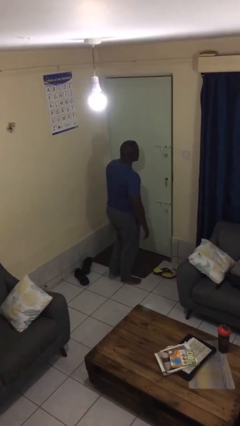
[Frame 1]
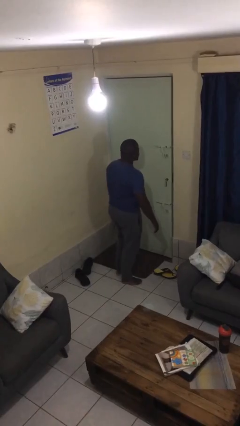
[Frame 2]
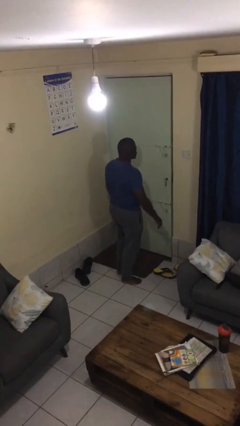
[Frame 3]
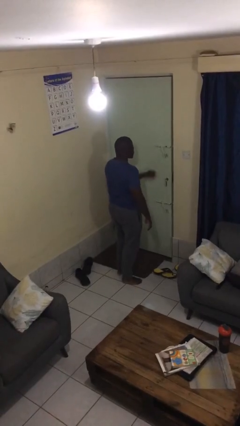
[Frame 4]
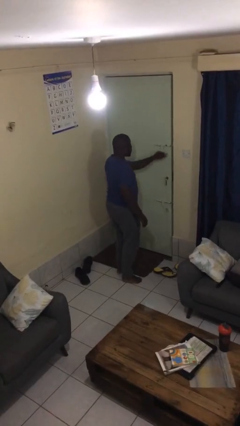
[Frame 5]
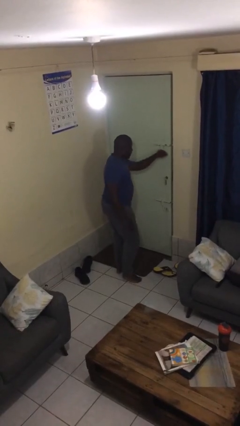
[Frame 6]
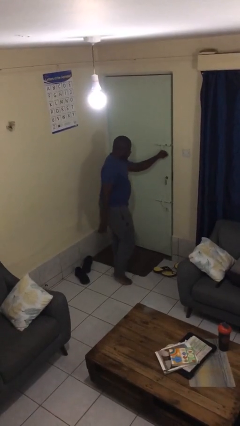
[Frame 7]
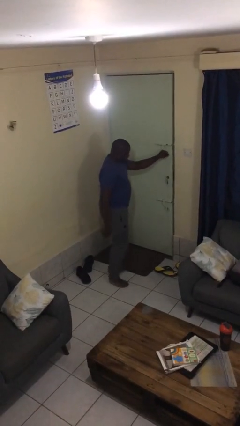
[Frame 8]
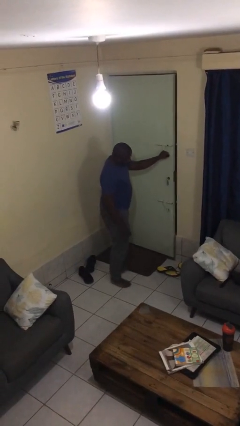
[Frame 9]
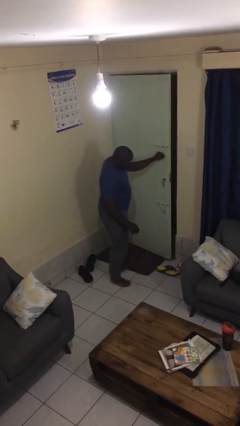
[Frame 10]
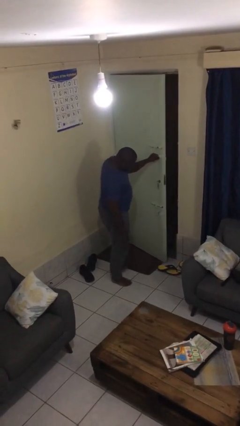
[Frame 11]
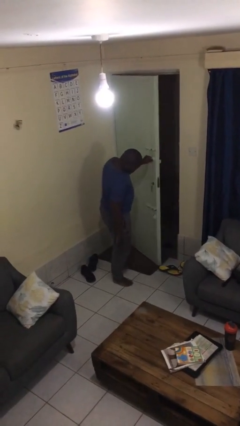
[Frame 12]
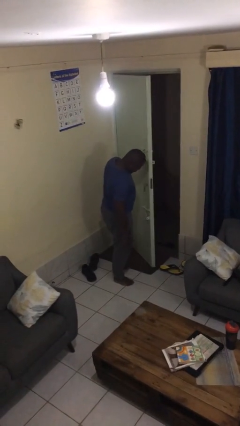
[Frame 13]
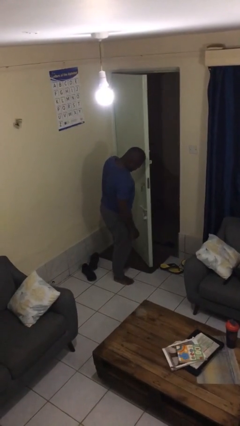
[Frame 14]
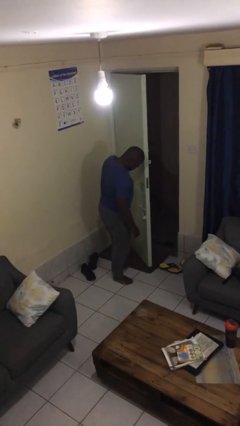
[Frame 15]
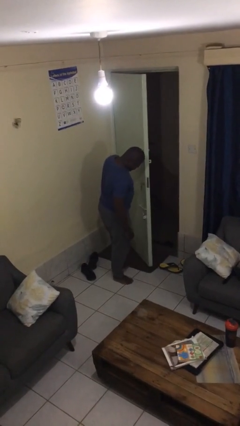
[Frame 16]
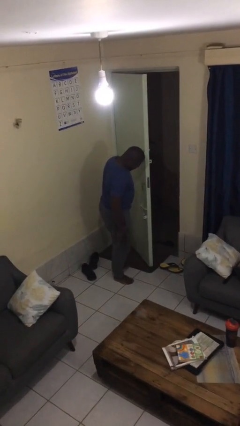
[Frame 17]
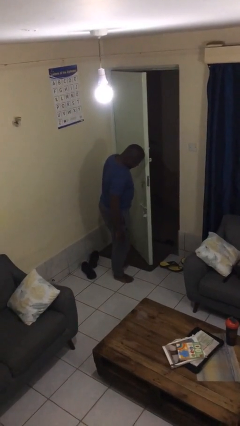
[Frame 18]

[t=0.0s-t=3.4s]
person opens facility door

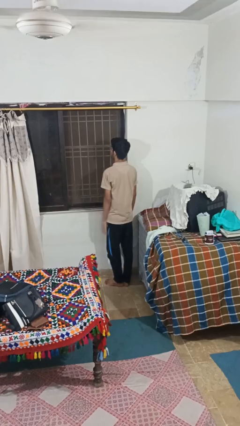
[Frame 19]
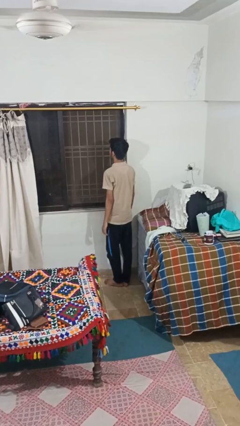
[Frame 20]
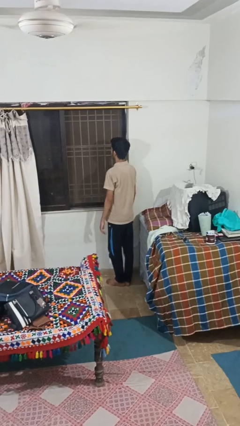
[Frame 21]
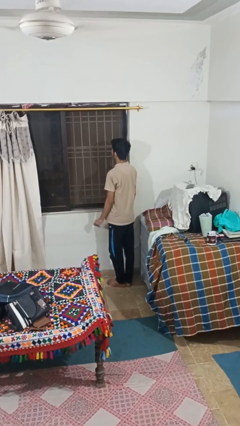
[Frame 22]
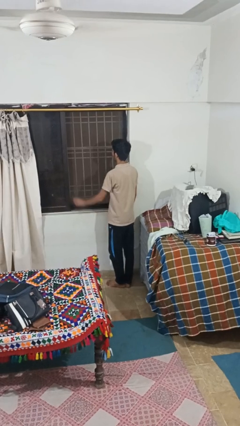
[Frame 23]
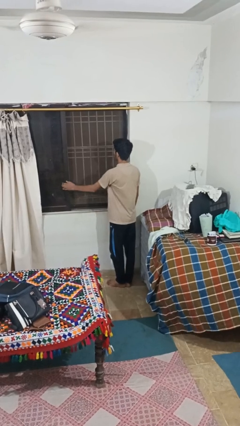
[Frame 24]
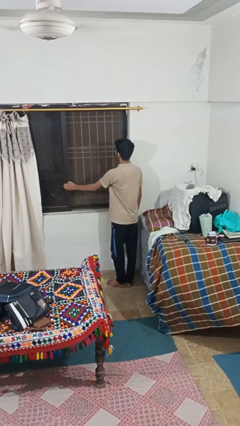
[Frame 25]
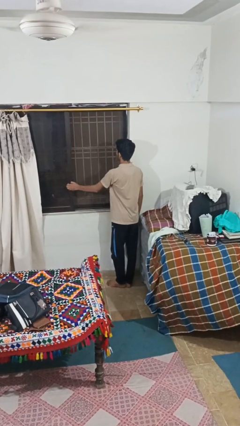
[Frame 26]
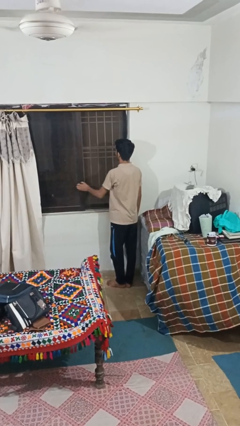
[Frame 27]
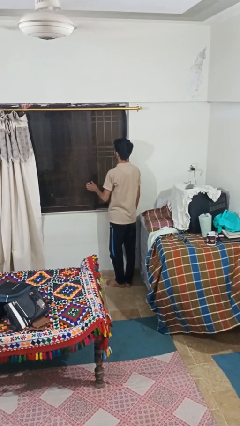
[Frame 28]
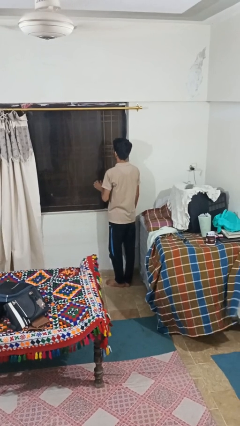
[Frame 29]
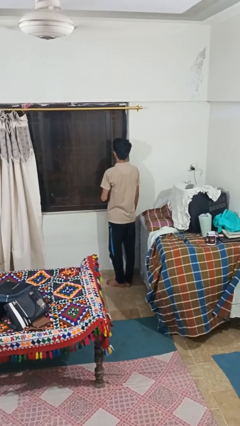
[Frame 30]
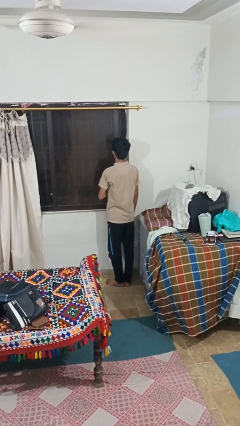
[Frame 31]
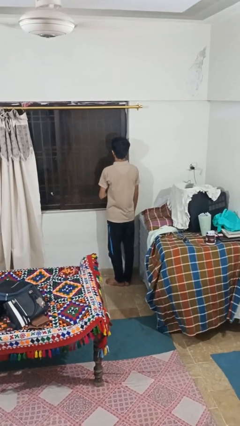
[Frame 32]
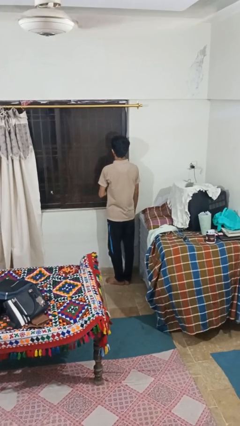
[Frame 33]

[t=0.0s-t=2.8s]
person closes sliding door

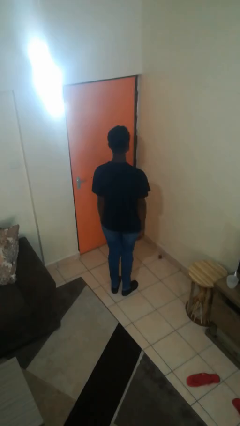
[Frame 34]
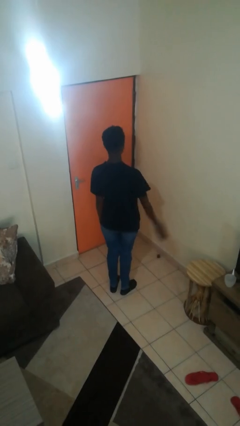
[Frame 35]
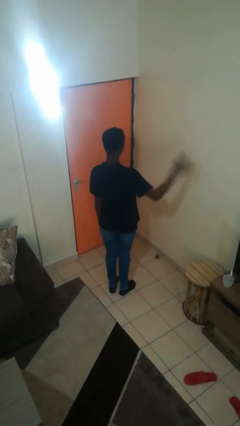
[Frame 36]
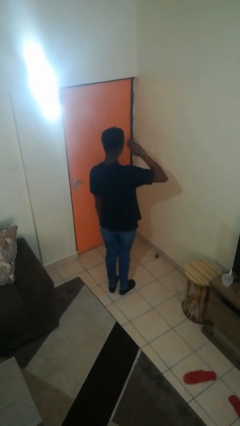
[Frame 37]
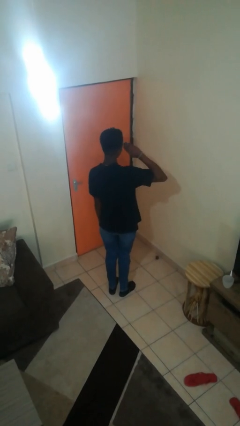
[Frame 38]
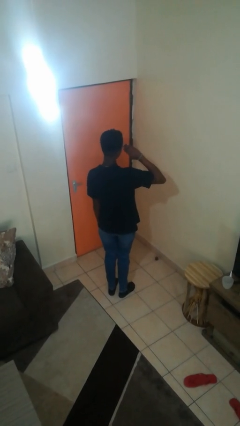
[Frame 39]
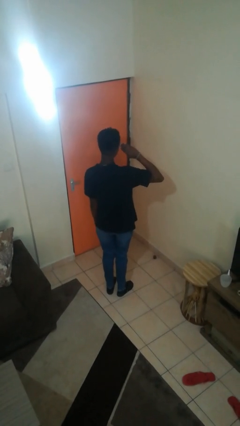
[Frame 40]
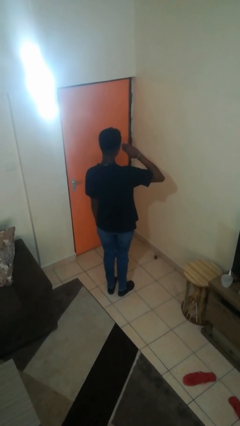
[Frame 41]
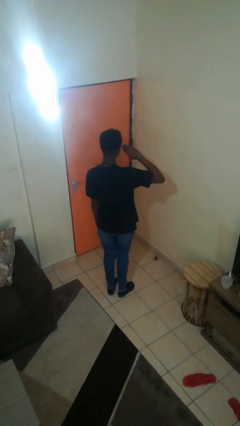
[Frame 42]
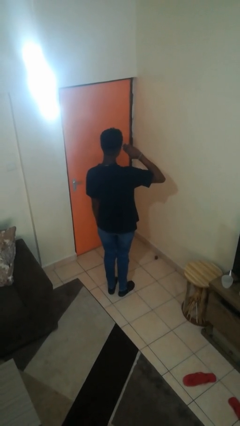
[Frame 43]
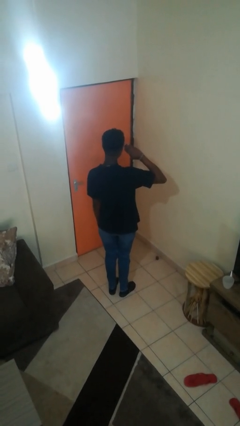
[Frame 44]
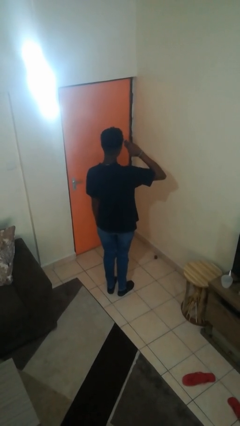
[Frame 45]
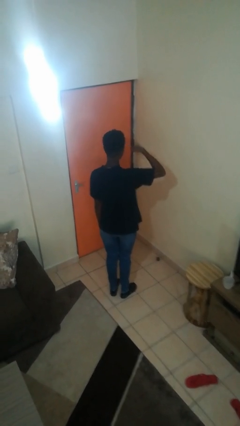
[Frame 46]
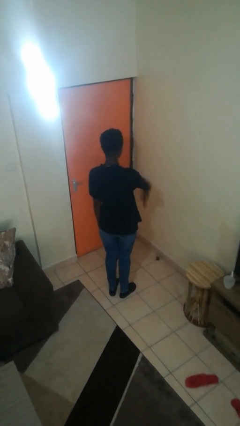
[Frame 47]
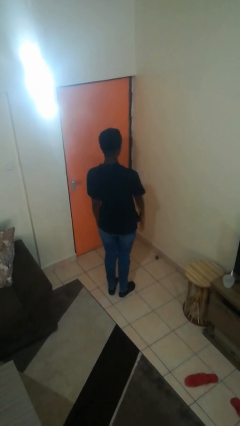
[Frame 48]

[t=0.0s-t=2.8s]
person salutes

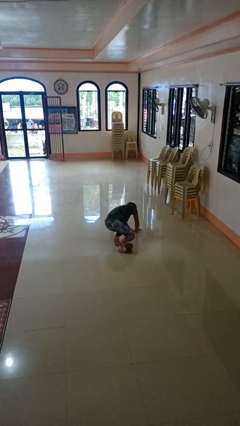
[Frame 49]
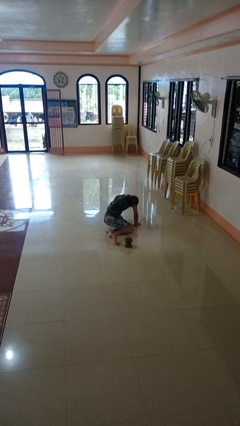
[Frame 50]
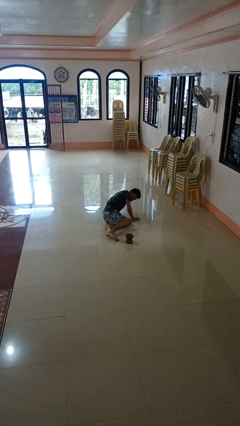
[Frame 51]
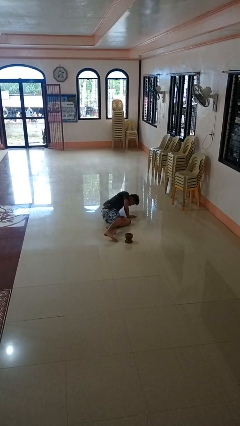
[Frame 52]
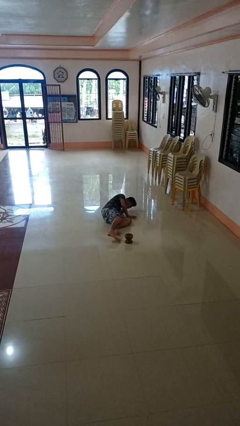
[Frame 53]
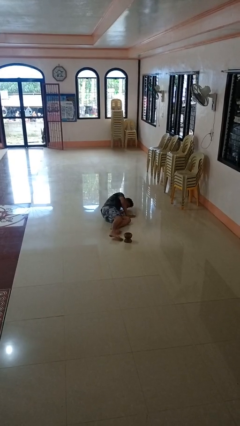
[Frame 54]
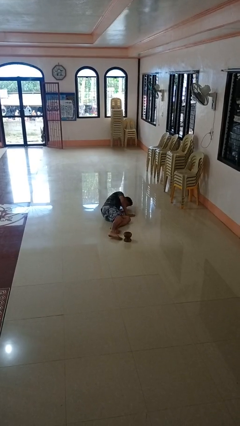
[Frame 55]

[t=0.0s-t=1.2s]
person trips on object on floor

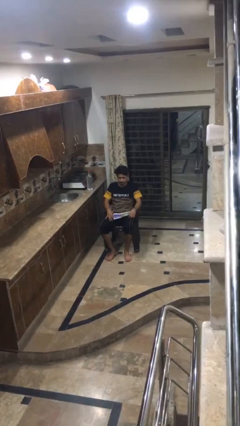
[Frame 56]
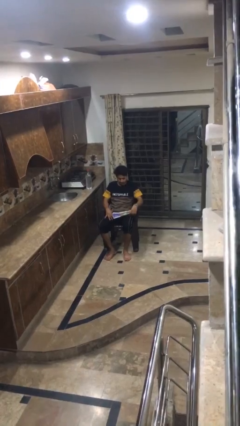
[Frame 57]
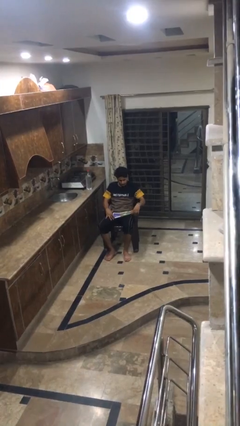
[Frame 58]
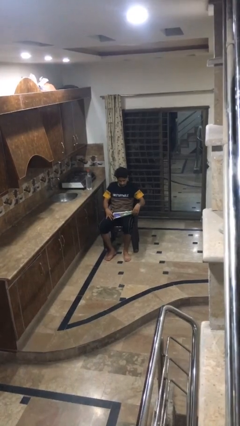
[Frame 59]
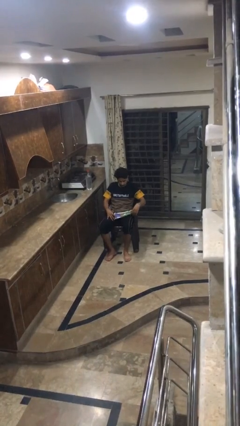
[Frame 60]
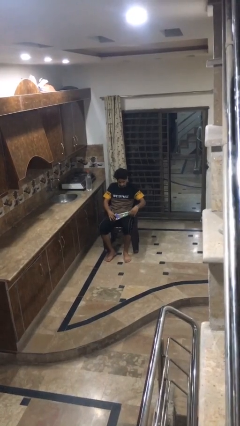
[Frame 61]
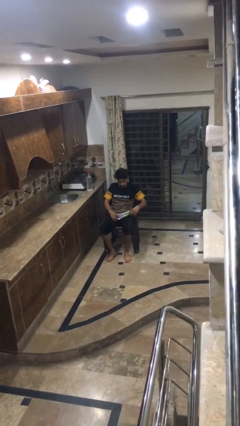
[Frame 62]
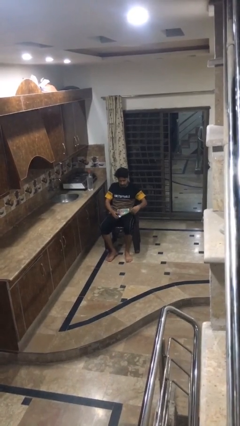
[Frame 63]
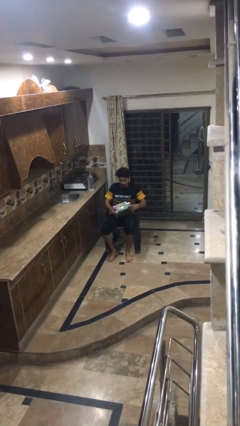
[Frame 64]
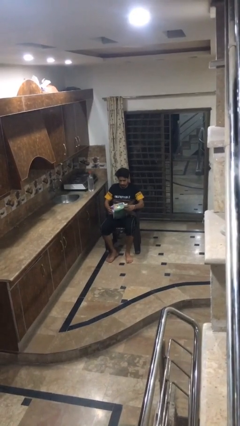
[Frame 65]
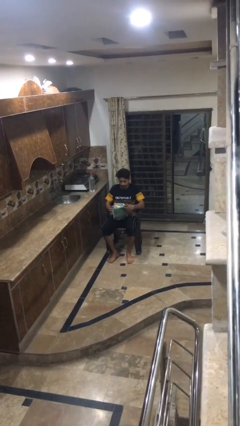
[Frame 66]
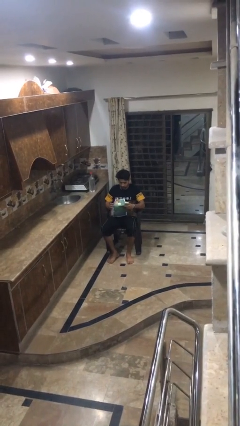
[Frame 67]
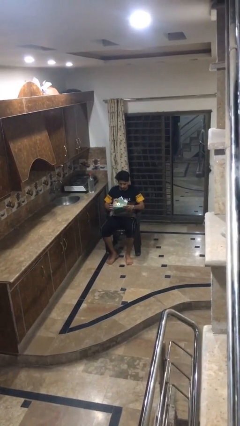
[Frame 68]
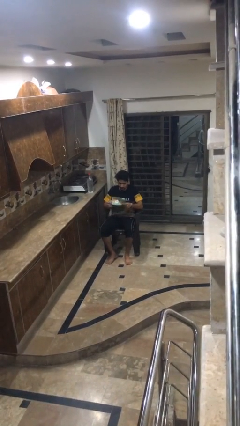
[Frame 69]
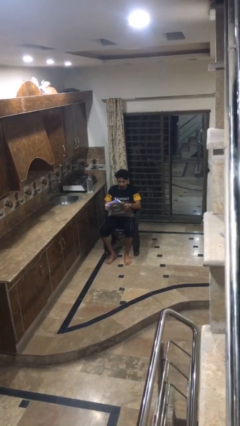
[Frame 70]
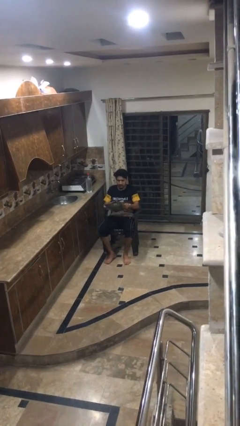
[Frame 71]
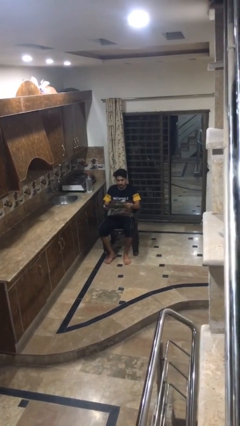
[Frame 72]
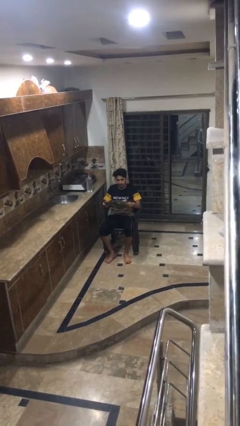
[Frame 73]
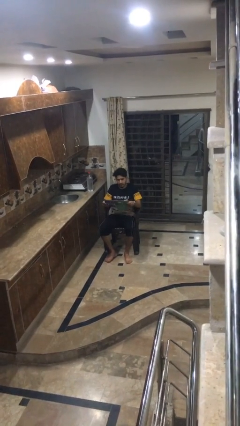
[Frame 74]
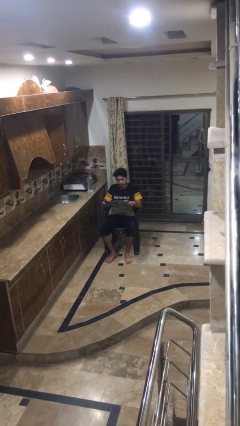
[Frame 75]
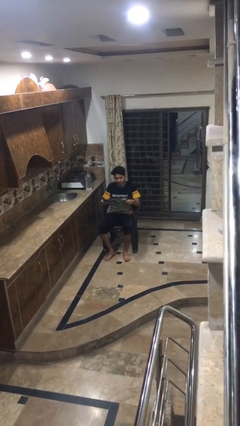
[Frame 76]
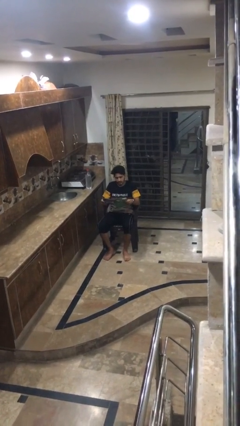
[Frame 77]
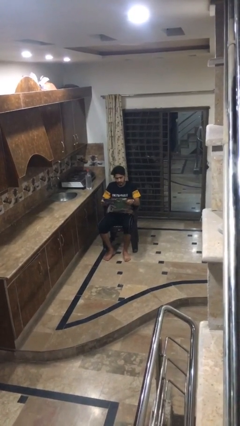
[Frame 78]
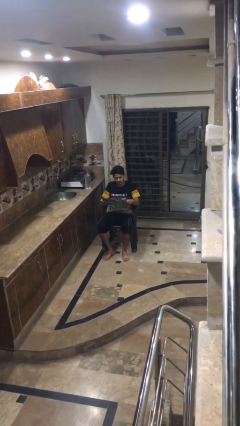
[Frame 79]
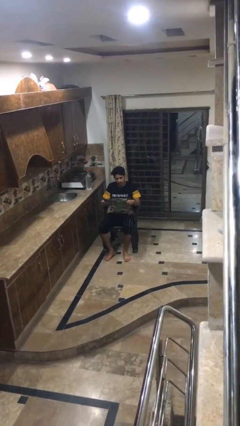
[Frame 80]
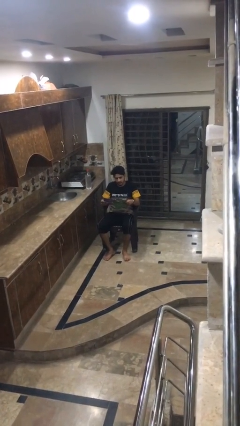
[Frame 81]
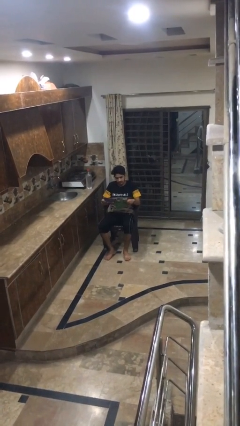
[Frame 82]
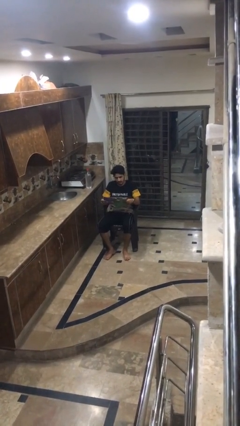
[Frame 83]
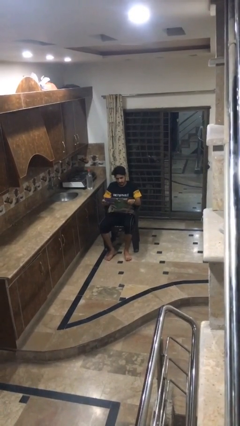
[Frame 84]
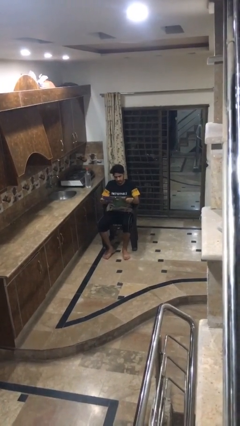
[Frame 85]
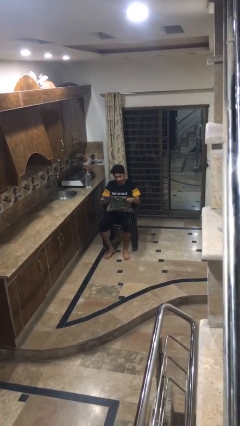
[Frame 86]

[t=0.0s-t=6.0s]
person reads newspaper

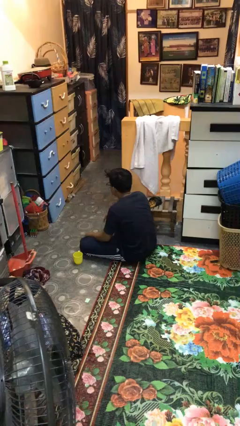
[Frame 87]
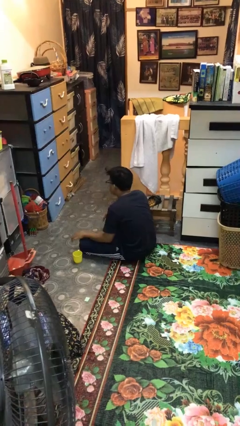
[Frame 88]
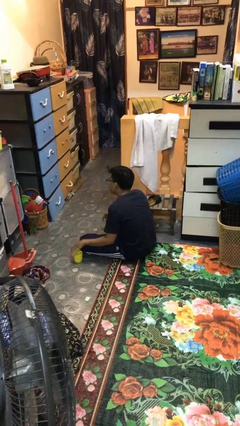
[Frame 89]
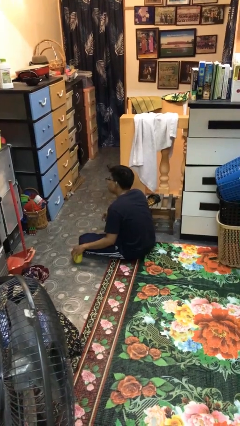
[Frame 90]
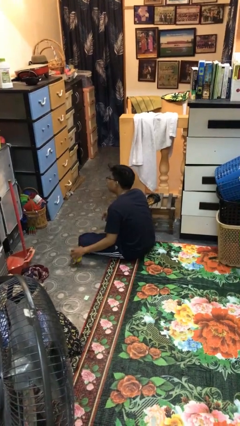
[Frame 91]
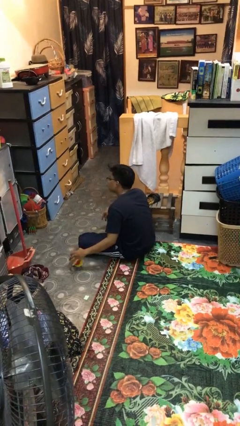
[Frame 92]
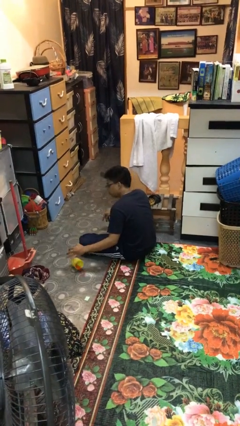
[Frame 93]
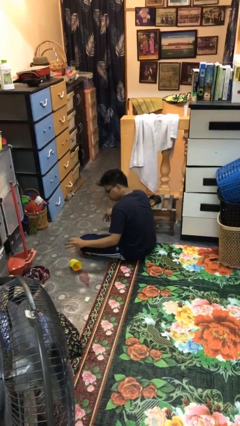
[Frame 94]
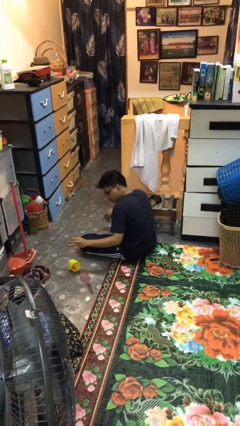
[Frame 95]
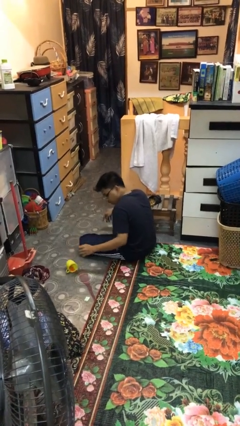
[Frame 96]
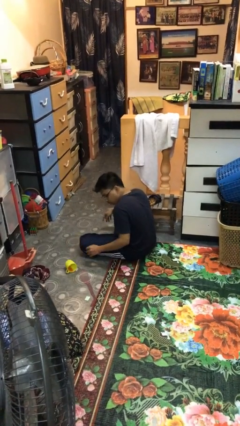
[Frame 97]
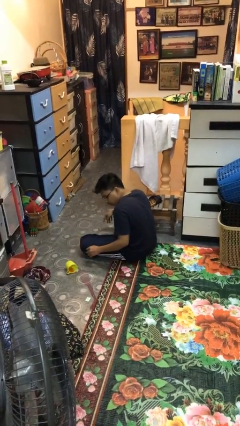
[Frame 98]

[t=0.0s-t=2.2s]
person spills on floor
